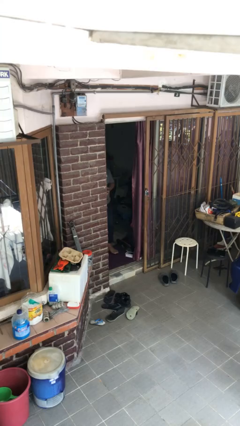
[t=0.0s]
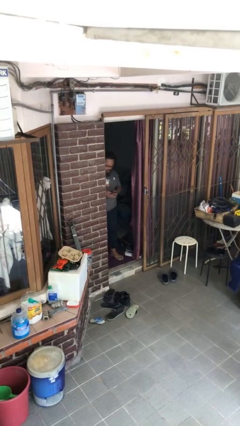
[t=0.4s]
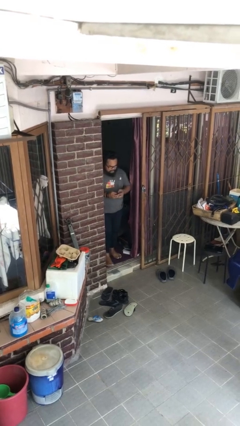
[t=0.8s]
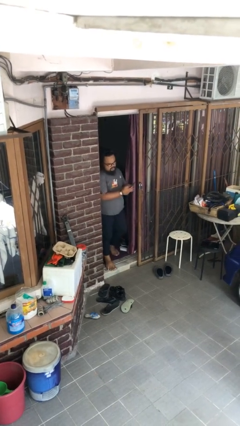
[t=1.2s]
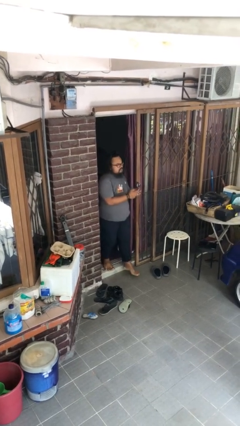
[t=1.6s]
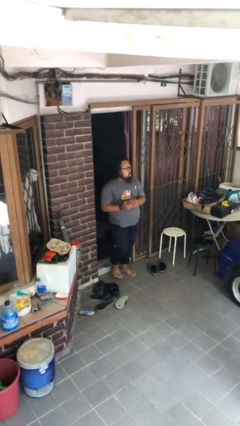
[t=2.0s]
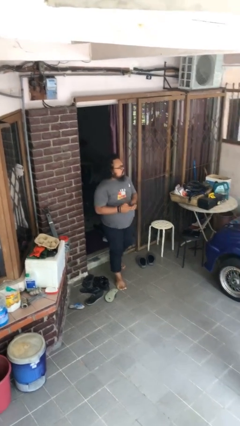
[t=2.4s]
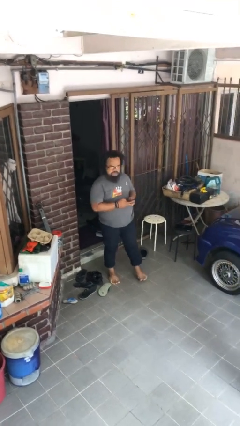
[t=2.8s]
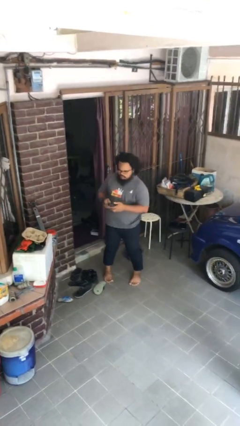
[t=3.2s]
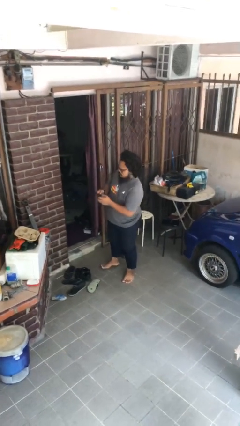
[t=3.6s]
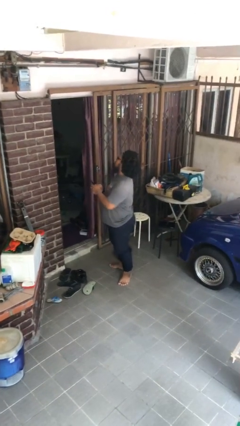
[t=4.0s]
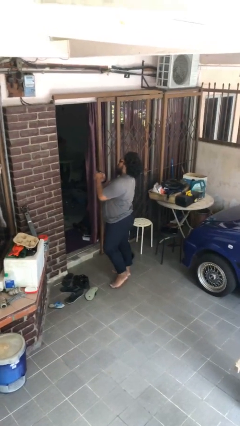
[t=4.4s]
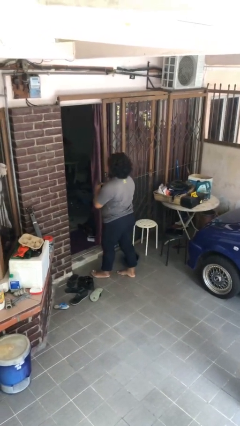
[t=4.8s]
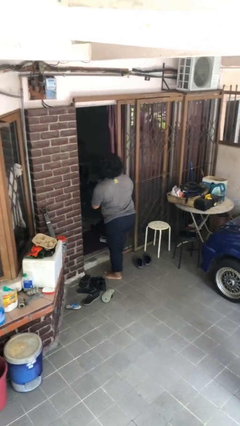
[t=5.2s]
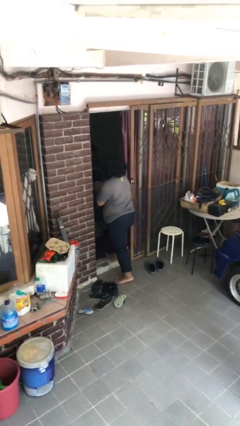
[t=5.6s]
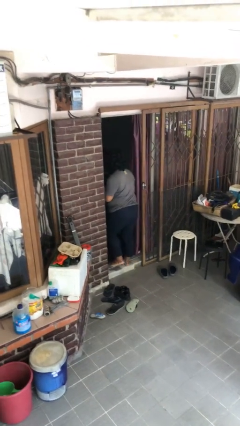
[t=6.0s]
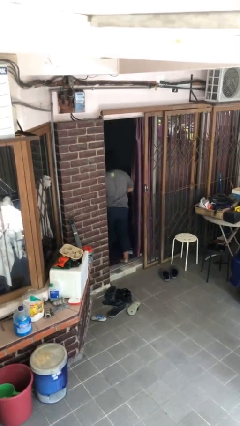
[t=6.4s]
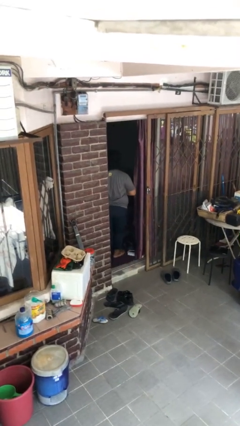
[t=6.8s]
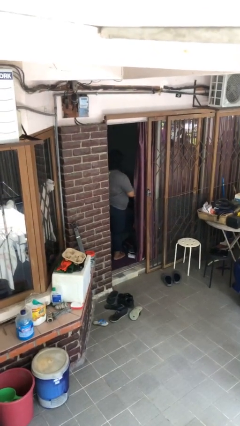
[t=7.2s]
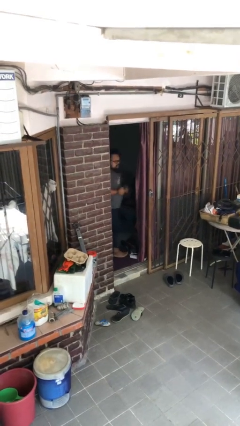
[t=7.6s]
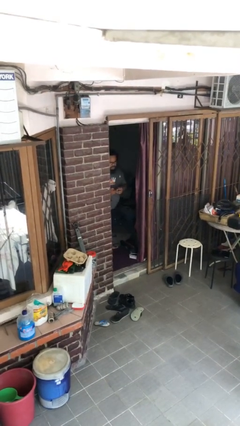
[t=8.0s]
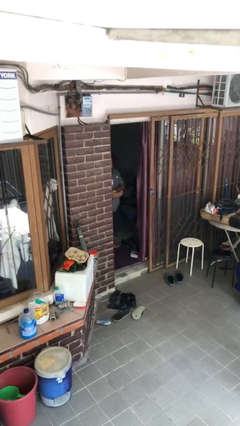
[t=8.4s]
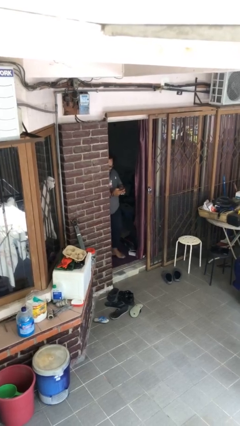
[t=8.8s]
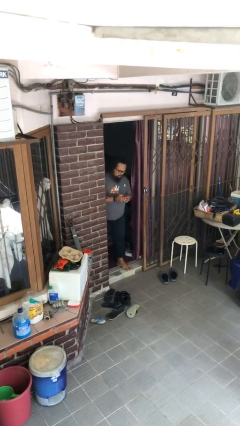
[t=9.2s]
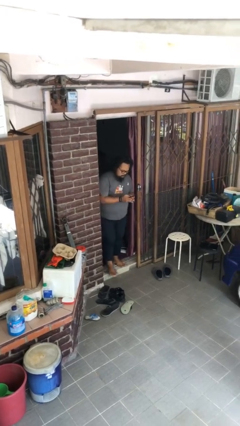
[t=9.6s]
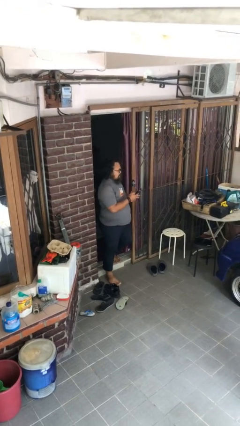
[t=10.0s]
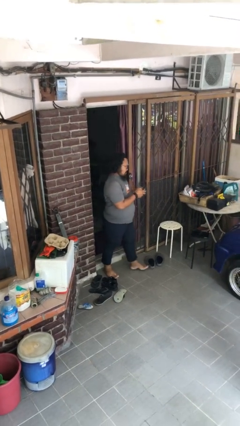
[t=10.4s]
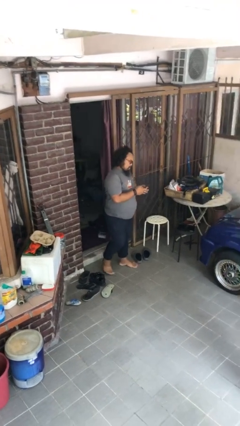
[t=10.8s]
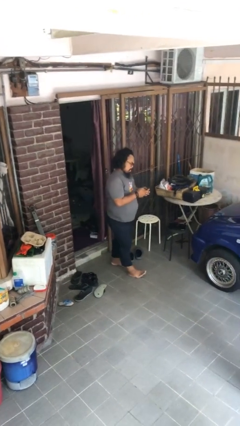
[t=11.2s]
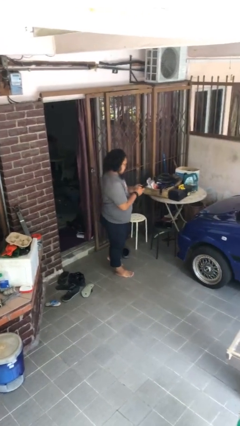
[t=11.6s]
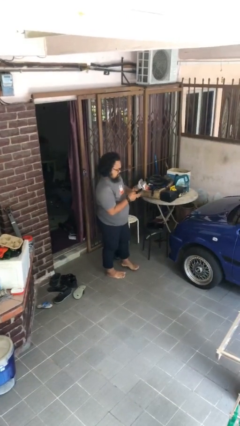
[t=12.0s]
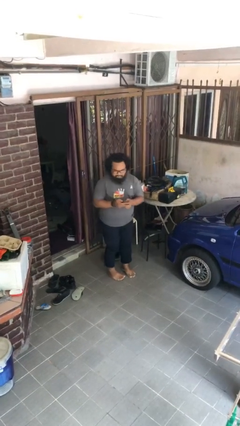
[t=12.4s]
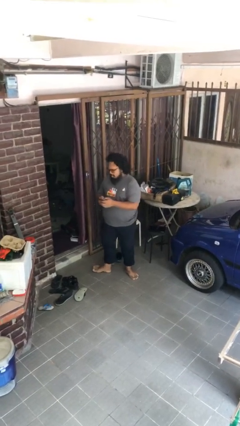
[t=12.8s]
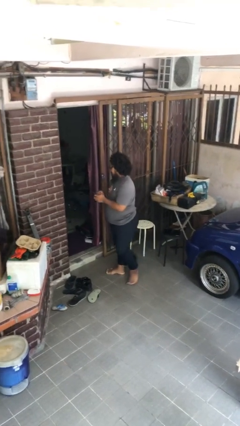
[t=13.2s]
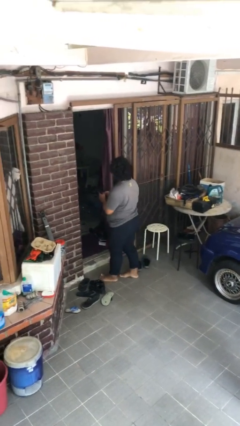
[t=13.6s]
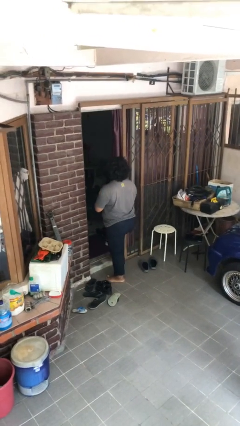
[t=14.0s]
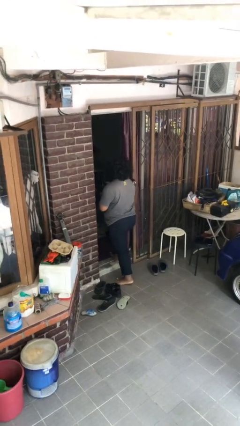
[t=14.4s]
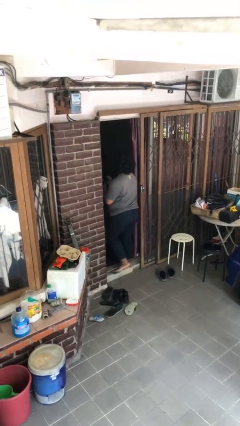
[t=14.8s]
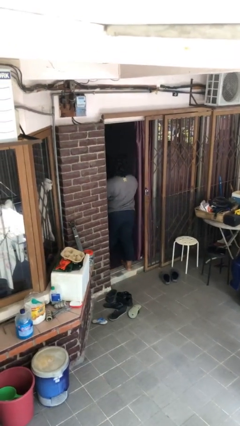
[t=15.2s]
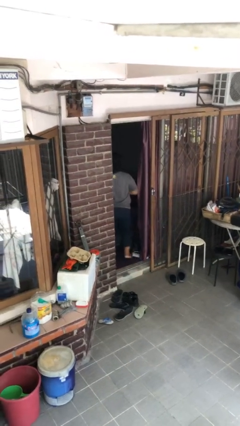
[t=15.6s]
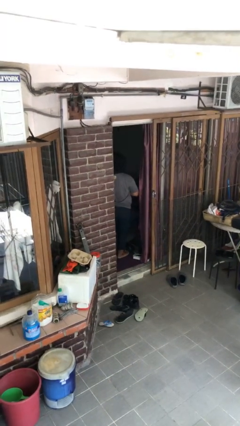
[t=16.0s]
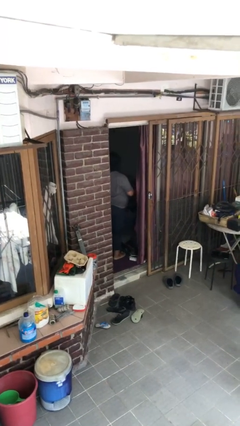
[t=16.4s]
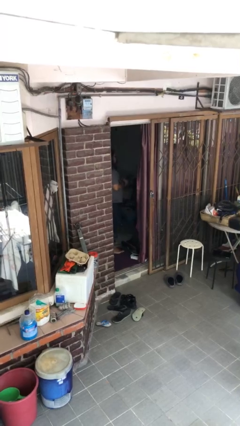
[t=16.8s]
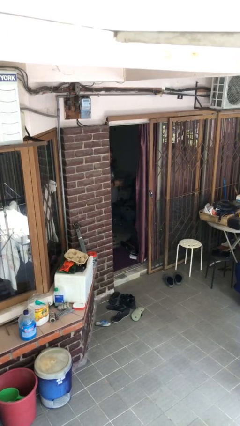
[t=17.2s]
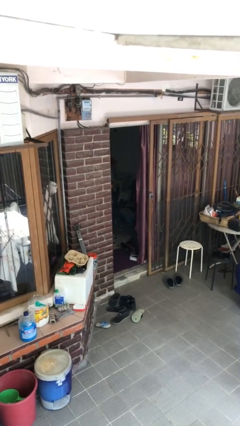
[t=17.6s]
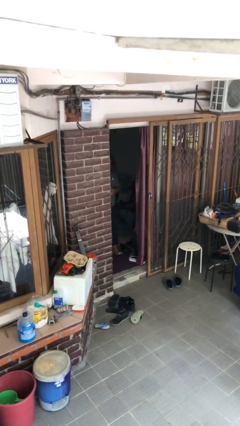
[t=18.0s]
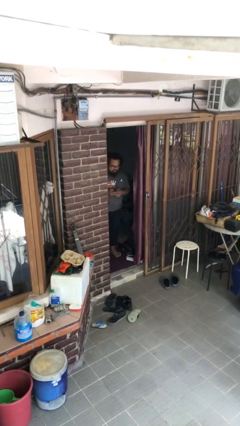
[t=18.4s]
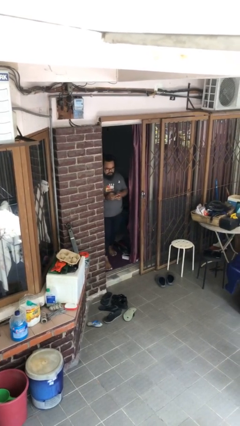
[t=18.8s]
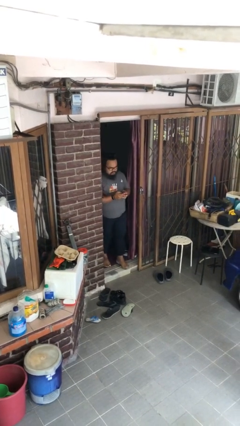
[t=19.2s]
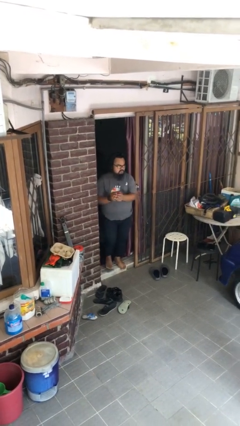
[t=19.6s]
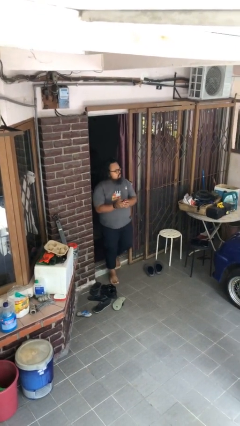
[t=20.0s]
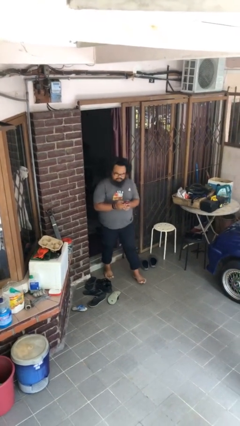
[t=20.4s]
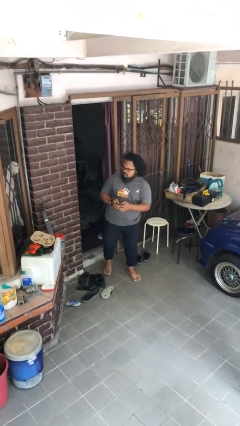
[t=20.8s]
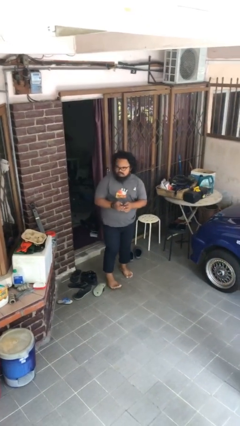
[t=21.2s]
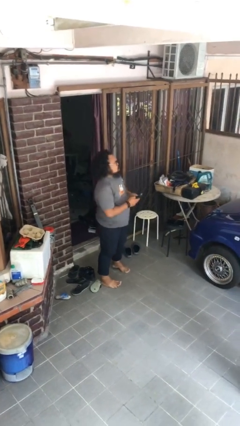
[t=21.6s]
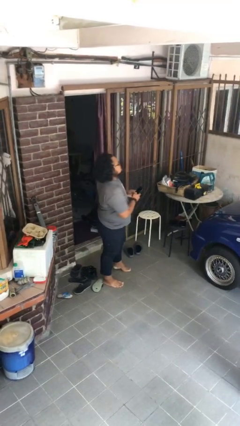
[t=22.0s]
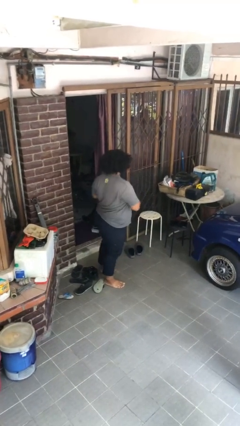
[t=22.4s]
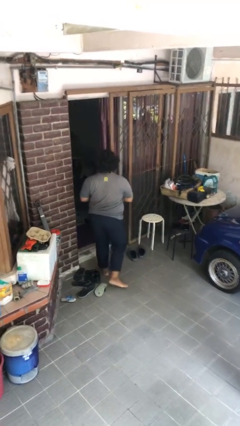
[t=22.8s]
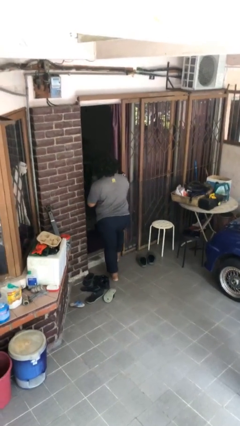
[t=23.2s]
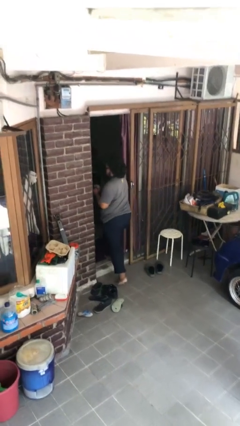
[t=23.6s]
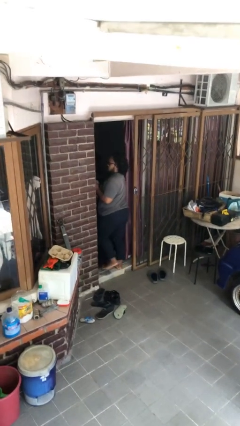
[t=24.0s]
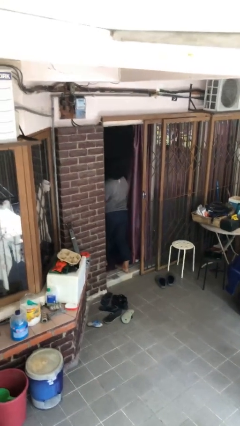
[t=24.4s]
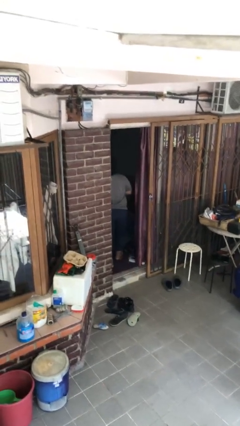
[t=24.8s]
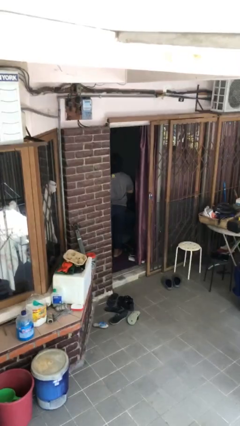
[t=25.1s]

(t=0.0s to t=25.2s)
person texts on phone

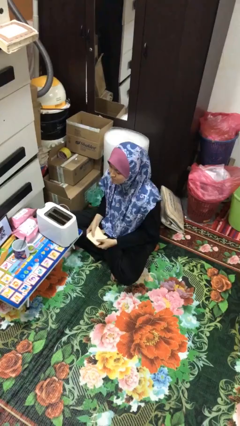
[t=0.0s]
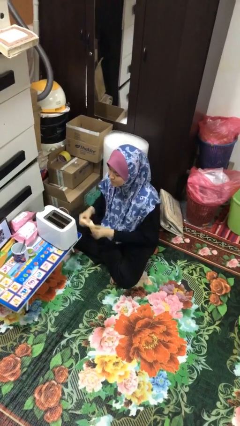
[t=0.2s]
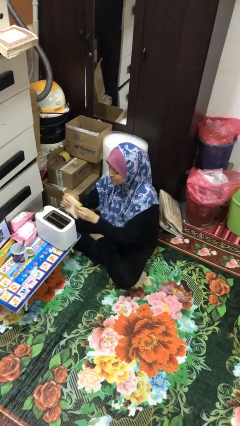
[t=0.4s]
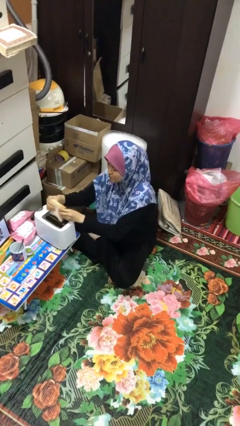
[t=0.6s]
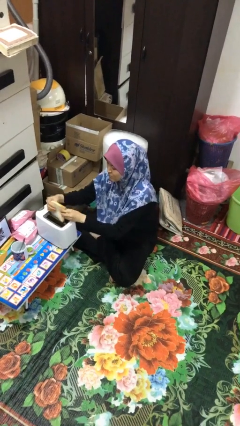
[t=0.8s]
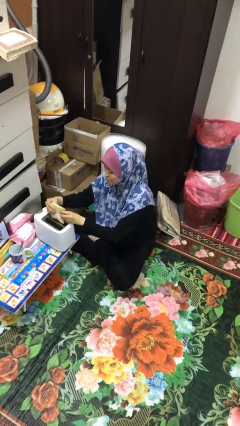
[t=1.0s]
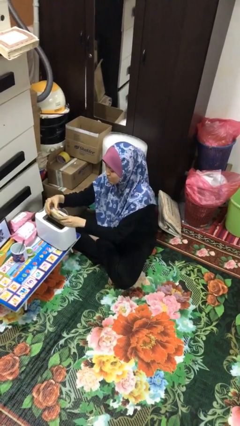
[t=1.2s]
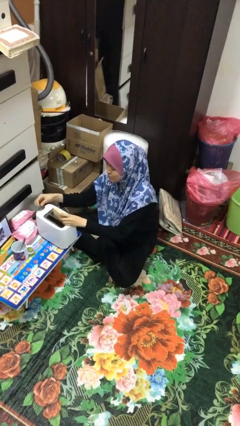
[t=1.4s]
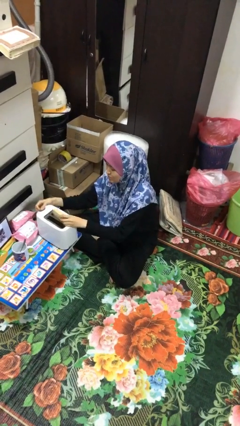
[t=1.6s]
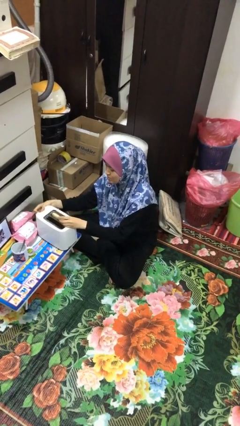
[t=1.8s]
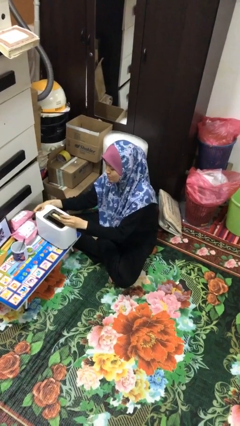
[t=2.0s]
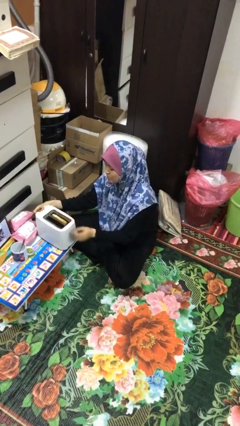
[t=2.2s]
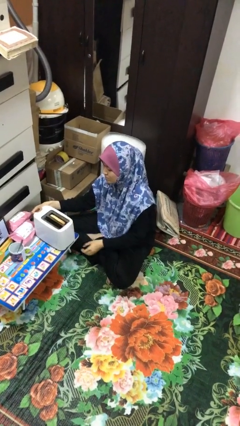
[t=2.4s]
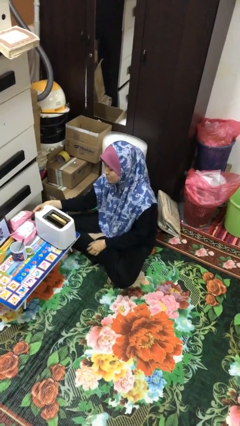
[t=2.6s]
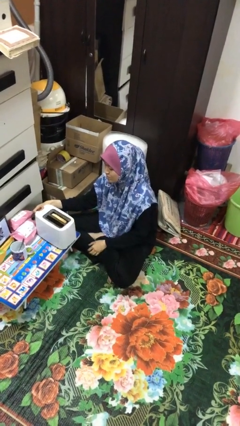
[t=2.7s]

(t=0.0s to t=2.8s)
person puts object into toaster

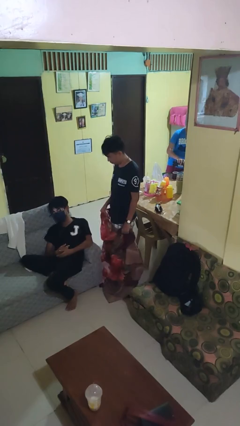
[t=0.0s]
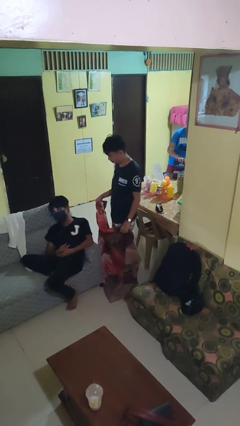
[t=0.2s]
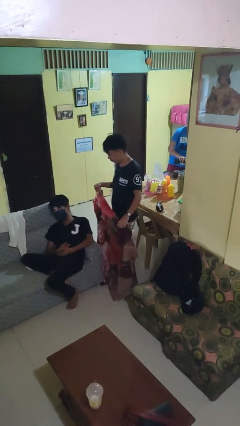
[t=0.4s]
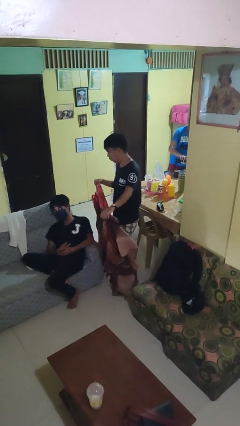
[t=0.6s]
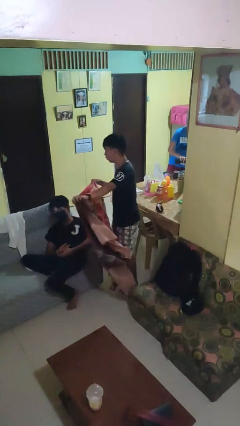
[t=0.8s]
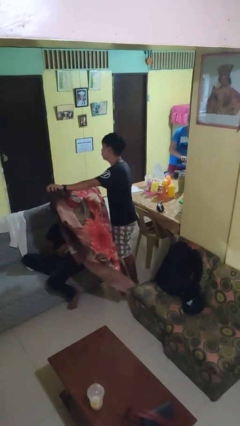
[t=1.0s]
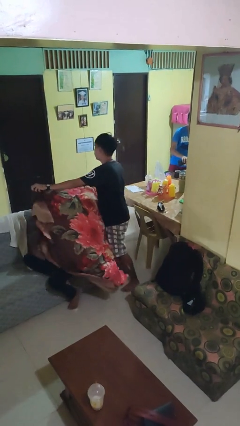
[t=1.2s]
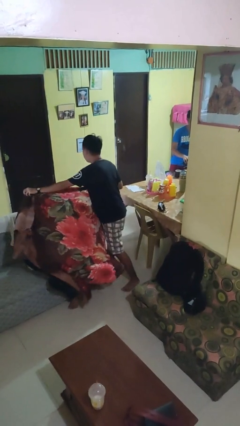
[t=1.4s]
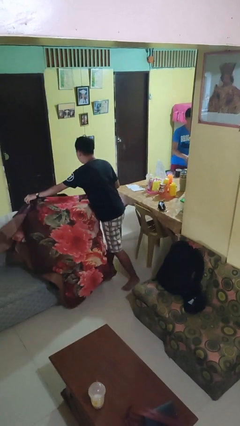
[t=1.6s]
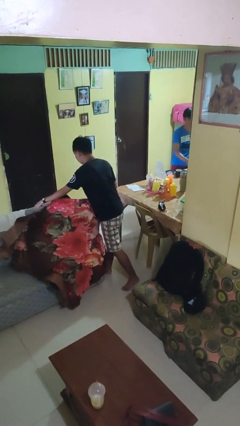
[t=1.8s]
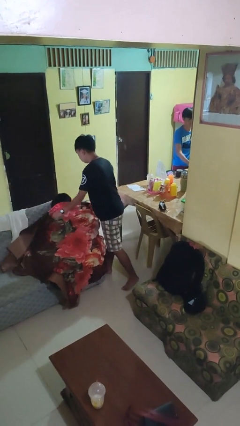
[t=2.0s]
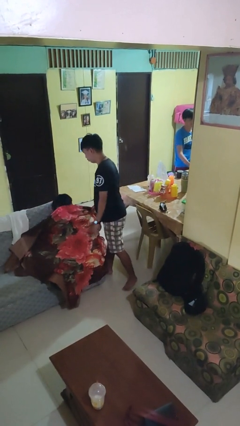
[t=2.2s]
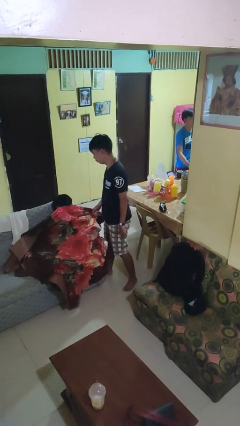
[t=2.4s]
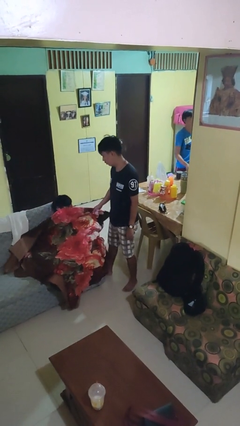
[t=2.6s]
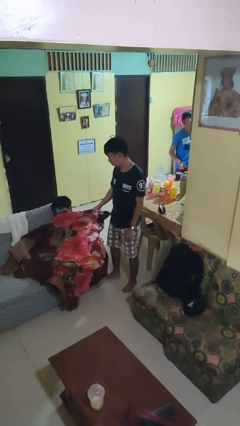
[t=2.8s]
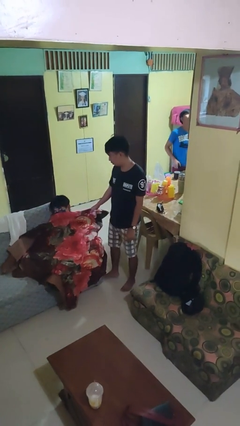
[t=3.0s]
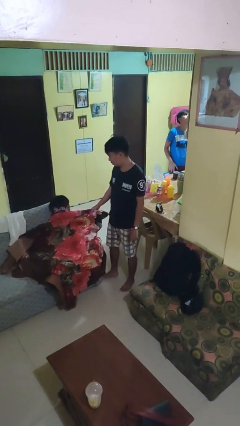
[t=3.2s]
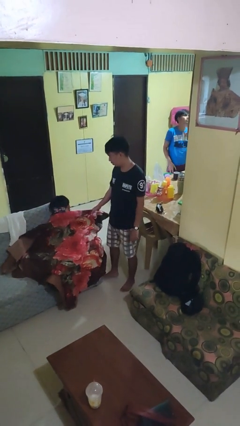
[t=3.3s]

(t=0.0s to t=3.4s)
person covers friend with blanket
